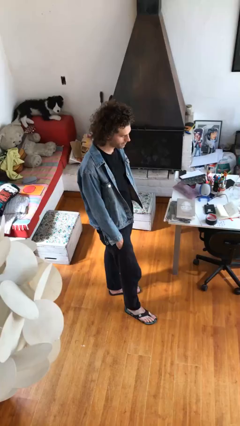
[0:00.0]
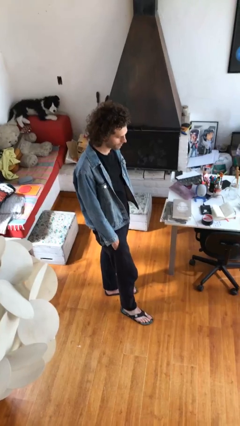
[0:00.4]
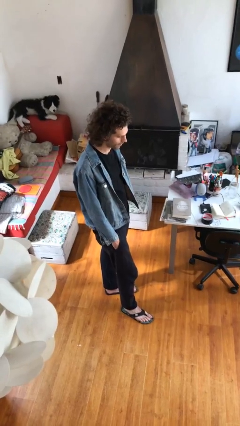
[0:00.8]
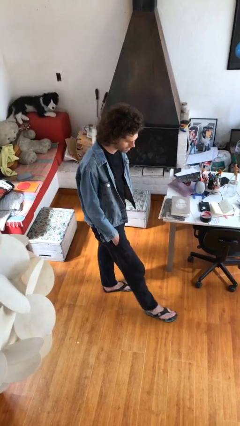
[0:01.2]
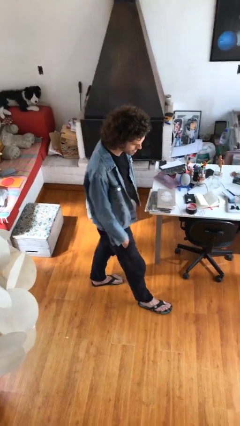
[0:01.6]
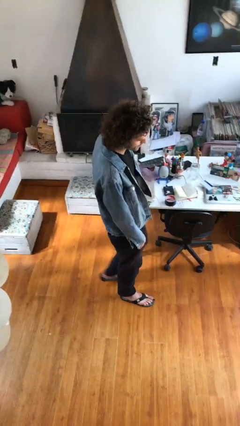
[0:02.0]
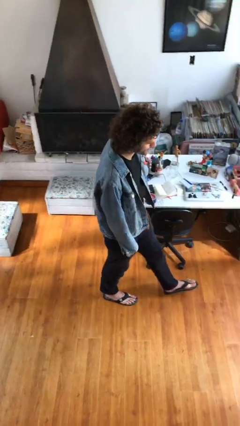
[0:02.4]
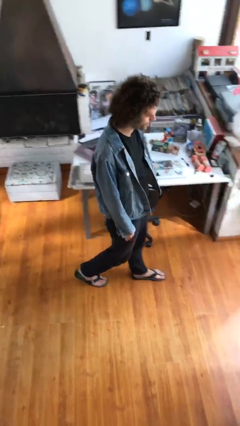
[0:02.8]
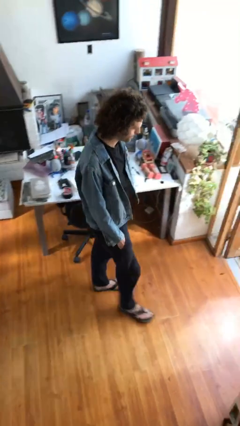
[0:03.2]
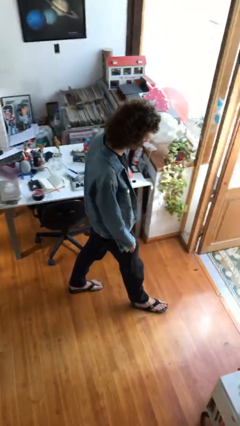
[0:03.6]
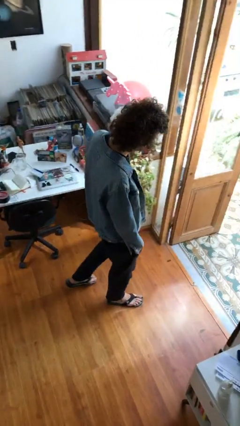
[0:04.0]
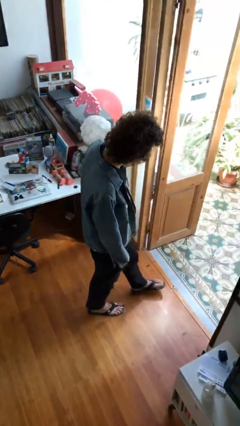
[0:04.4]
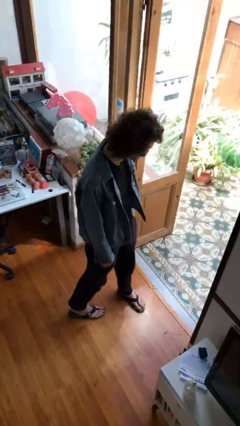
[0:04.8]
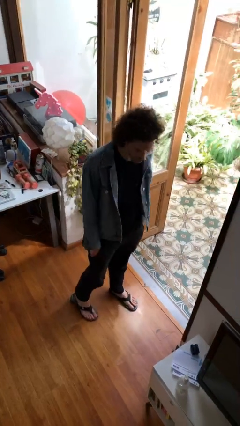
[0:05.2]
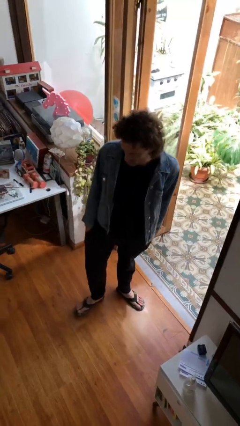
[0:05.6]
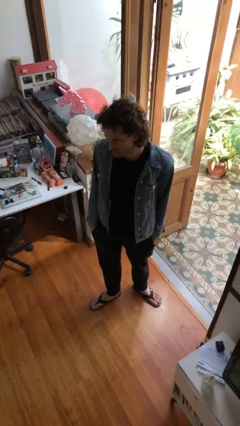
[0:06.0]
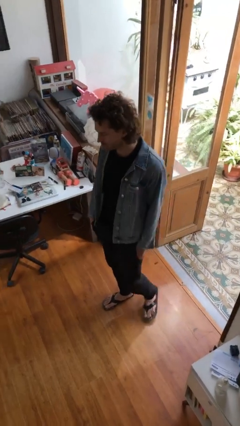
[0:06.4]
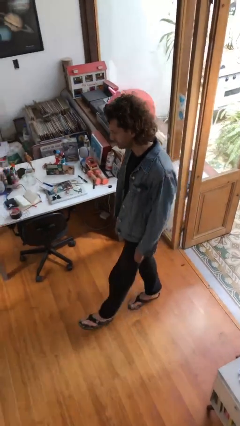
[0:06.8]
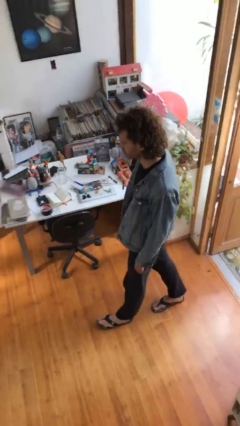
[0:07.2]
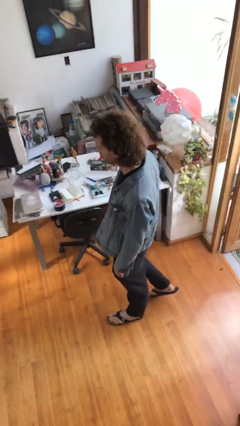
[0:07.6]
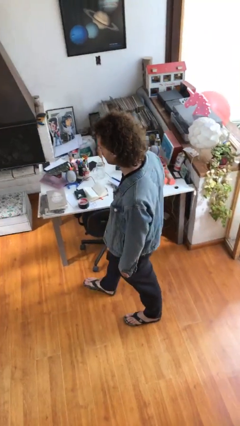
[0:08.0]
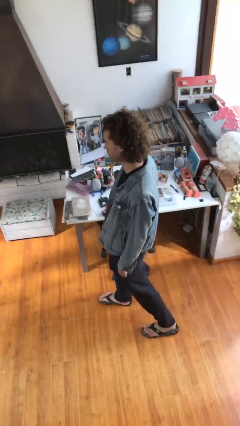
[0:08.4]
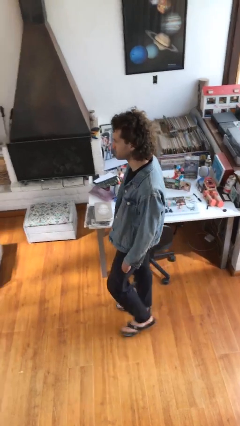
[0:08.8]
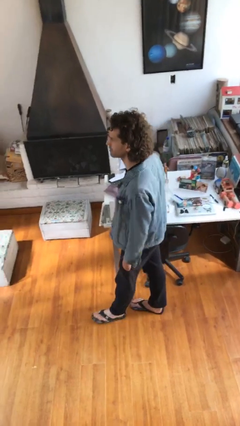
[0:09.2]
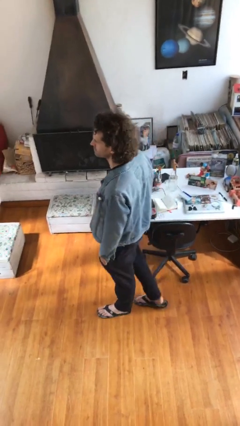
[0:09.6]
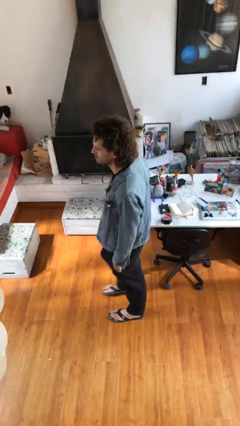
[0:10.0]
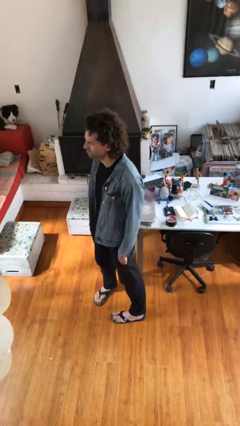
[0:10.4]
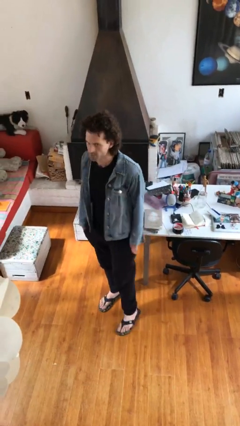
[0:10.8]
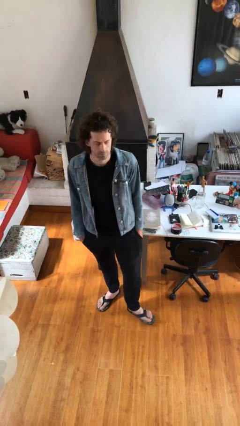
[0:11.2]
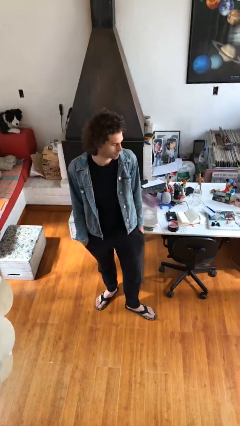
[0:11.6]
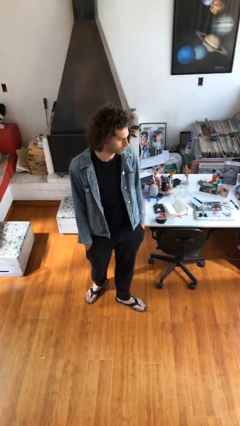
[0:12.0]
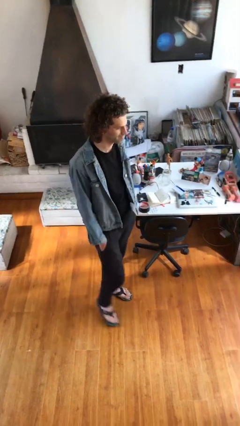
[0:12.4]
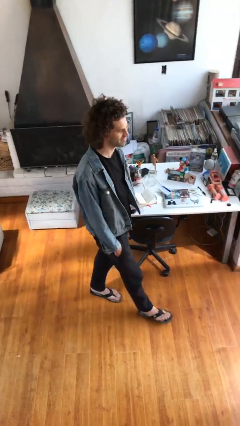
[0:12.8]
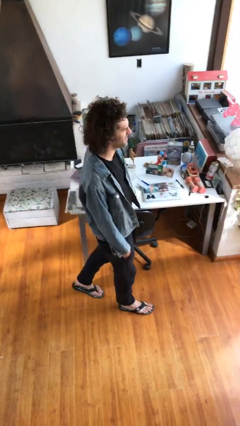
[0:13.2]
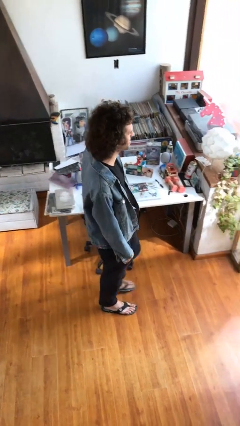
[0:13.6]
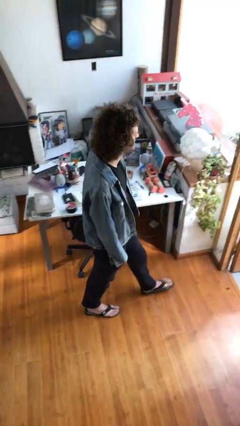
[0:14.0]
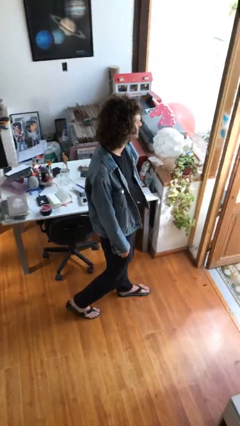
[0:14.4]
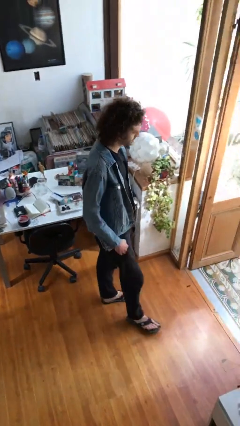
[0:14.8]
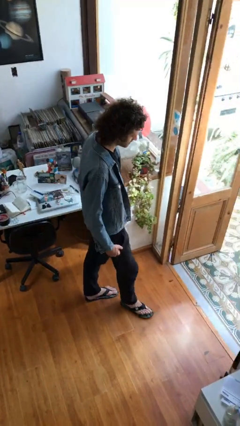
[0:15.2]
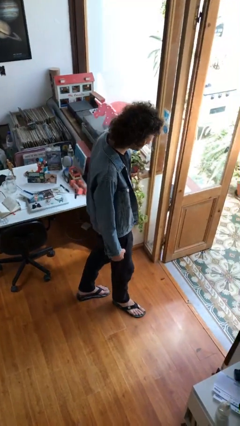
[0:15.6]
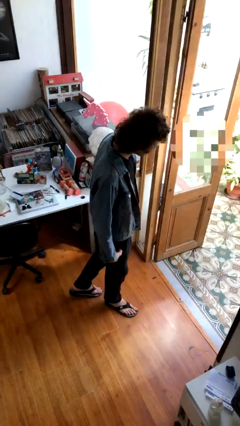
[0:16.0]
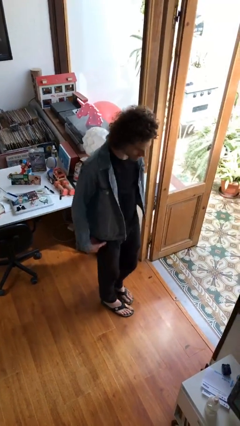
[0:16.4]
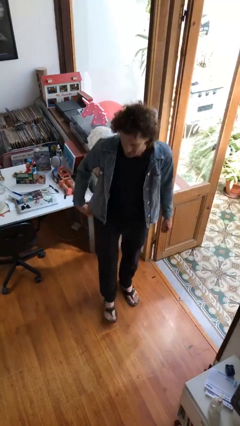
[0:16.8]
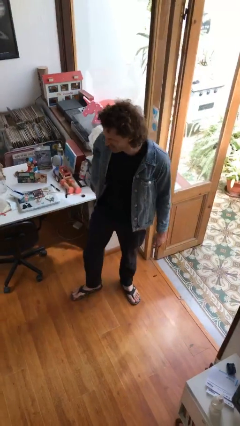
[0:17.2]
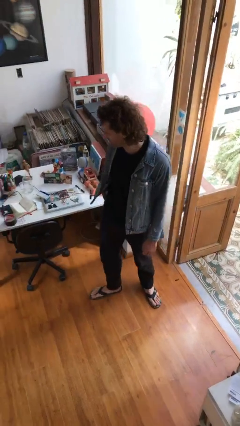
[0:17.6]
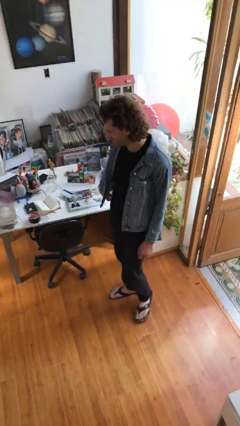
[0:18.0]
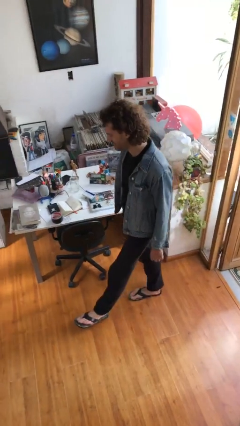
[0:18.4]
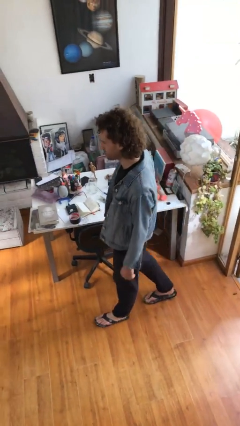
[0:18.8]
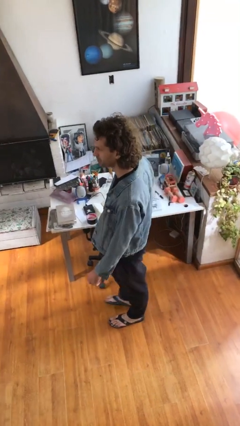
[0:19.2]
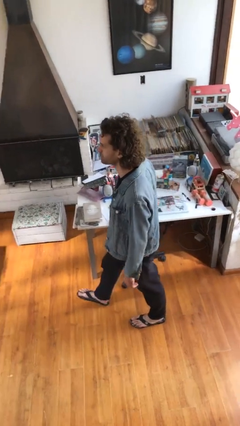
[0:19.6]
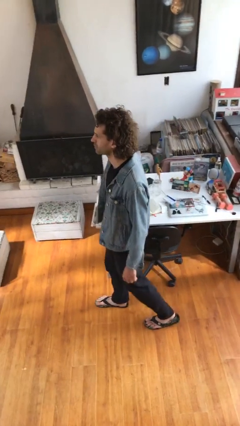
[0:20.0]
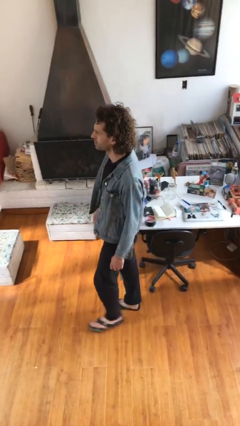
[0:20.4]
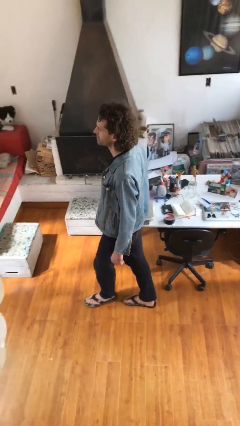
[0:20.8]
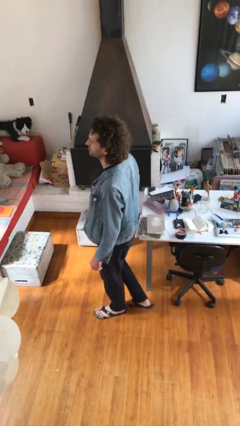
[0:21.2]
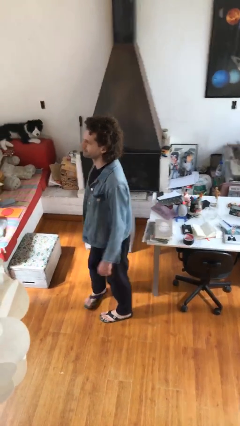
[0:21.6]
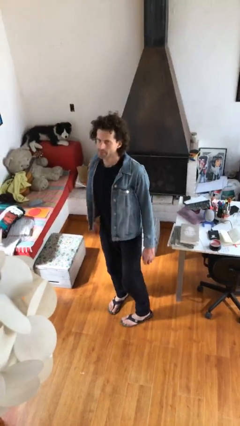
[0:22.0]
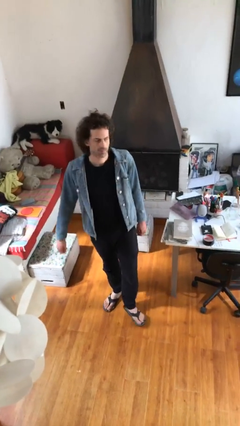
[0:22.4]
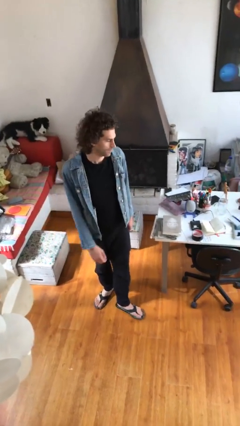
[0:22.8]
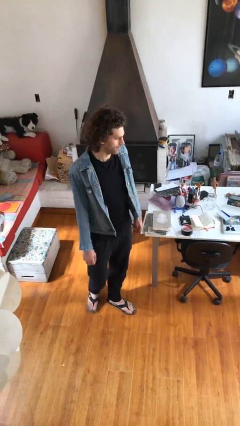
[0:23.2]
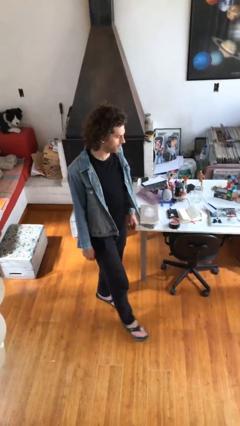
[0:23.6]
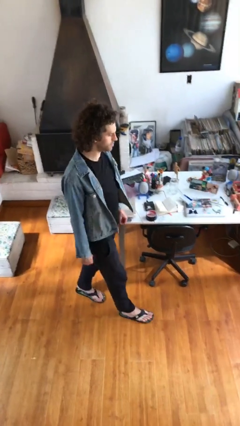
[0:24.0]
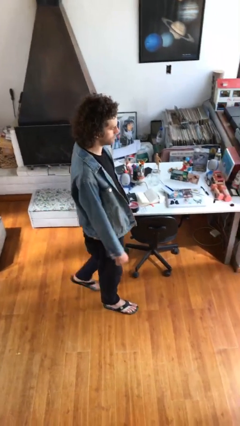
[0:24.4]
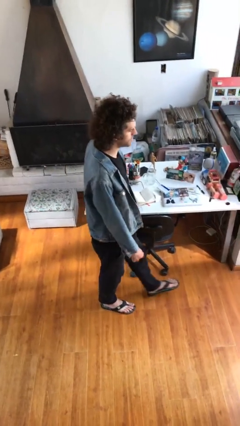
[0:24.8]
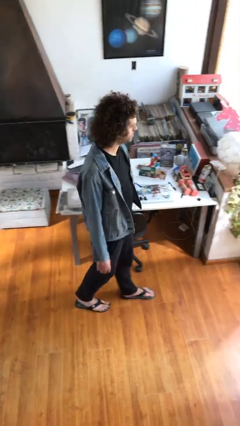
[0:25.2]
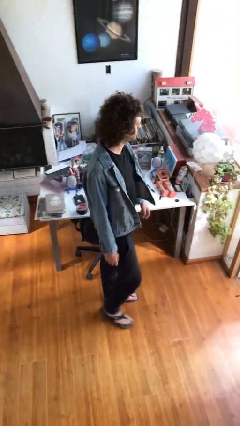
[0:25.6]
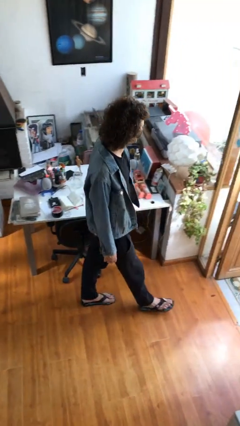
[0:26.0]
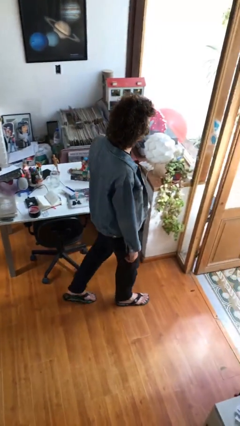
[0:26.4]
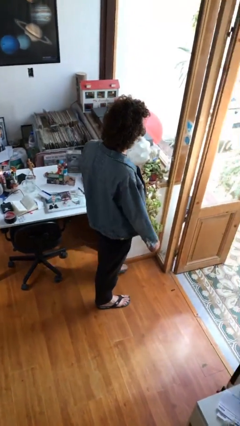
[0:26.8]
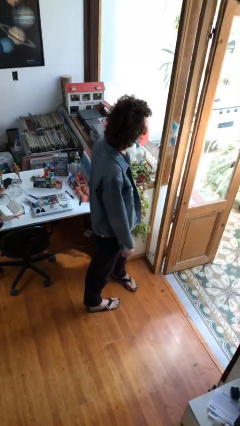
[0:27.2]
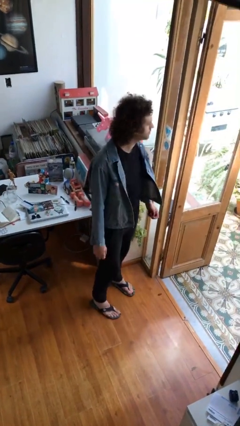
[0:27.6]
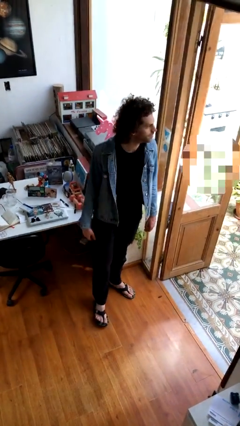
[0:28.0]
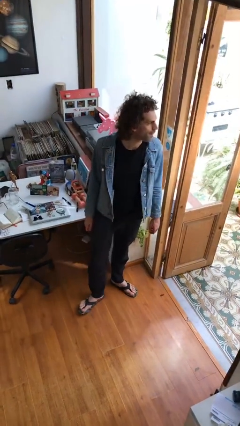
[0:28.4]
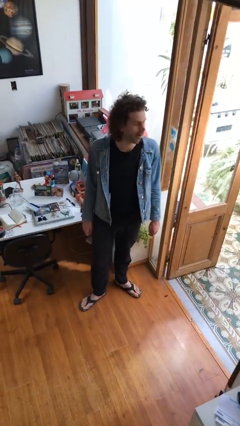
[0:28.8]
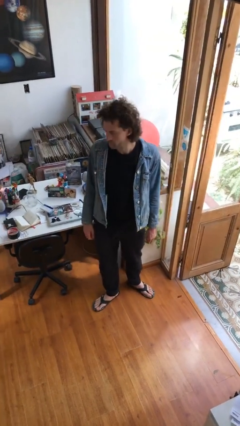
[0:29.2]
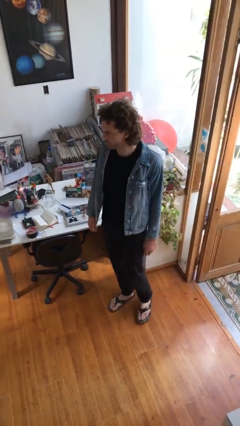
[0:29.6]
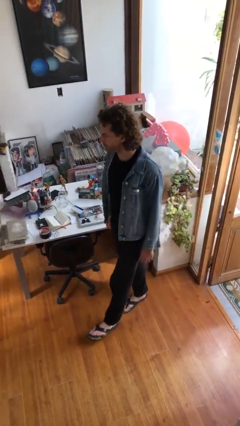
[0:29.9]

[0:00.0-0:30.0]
person walks

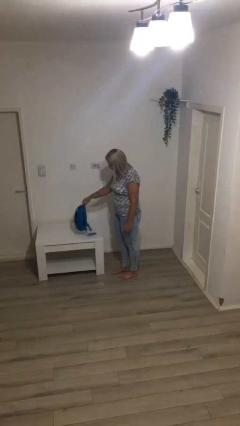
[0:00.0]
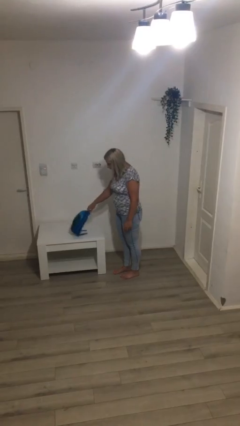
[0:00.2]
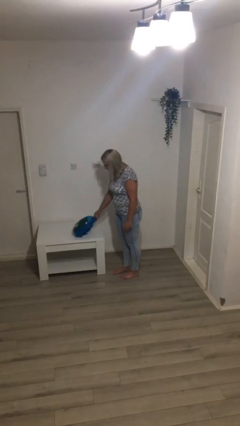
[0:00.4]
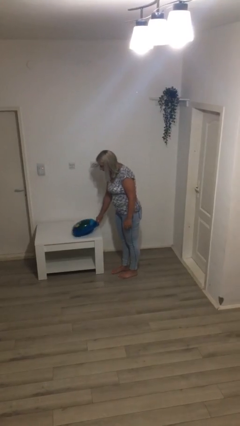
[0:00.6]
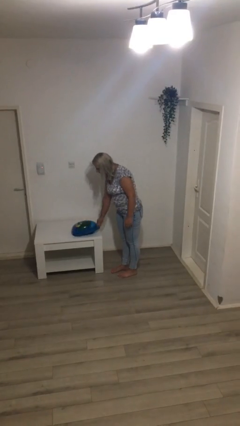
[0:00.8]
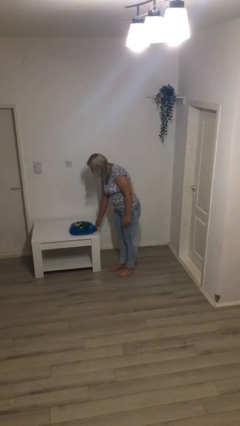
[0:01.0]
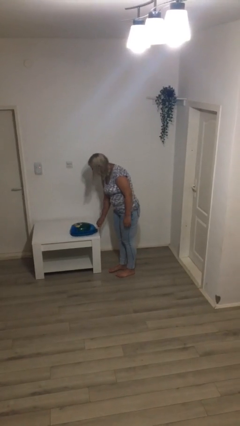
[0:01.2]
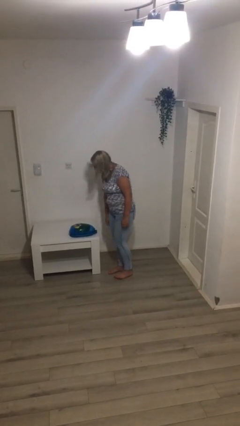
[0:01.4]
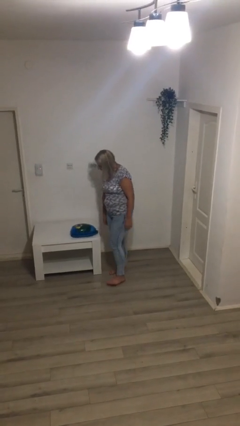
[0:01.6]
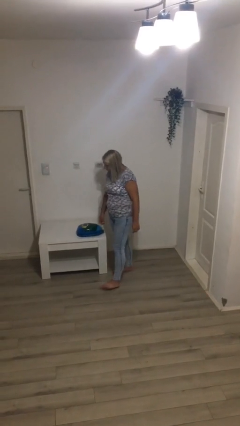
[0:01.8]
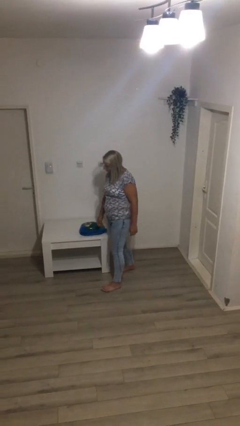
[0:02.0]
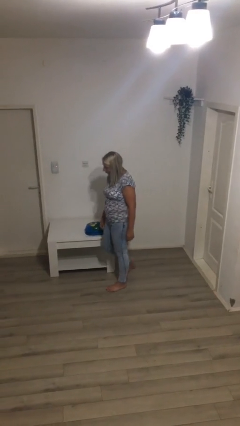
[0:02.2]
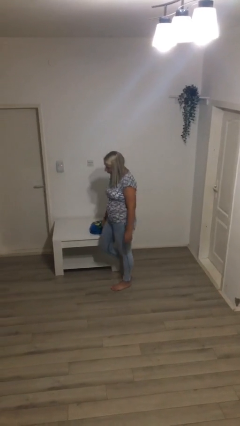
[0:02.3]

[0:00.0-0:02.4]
person puts down object on table

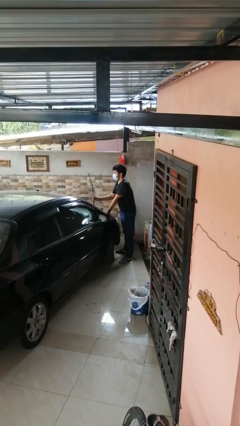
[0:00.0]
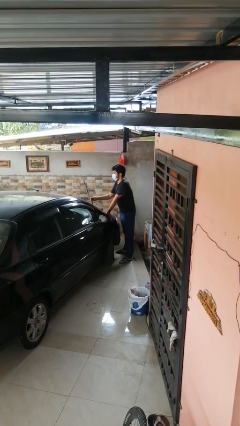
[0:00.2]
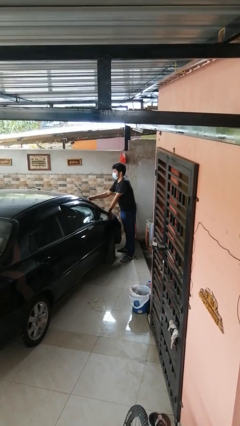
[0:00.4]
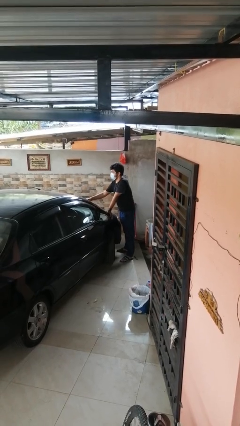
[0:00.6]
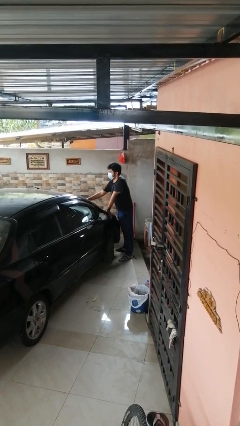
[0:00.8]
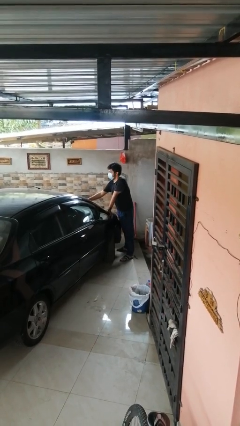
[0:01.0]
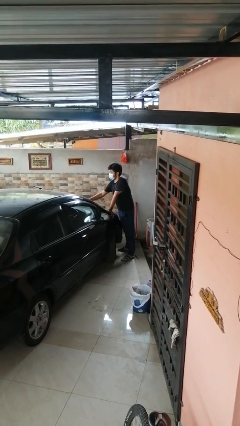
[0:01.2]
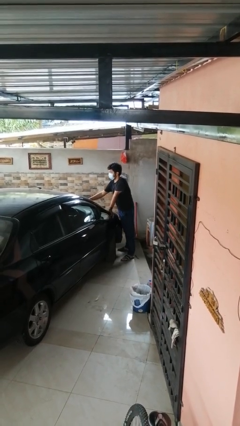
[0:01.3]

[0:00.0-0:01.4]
person flips down car wipers
